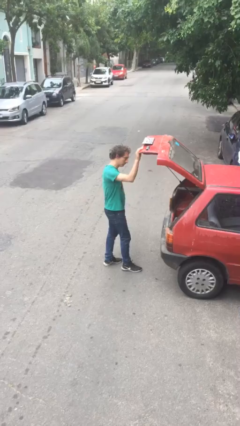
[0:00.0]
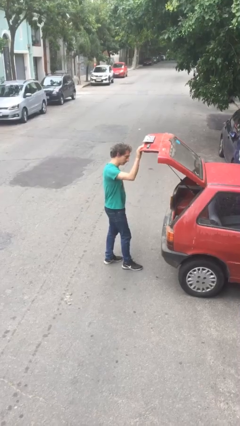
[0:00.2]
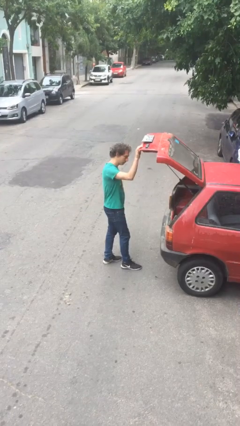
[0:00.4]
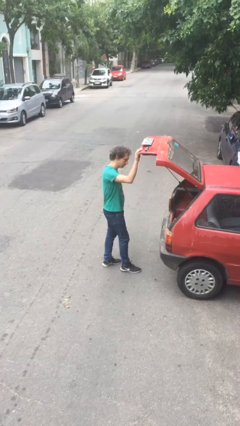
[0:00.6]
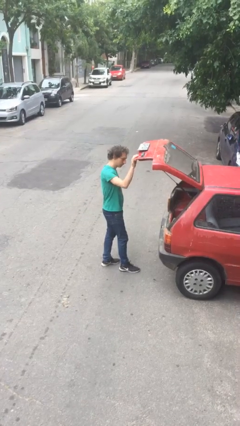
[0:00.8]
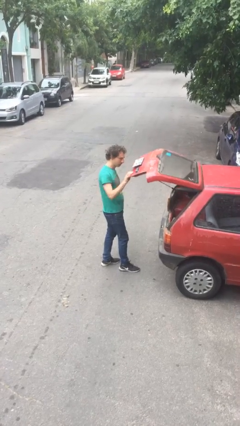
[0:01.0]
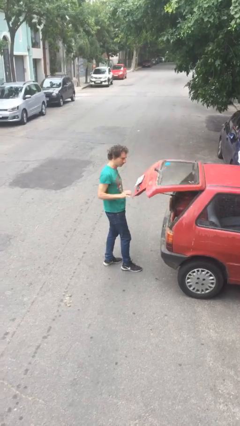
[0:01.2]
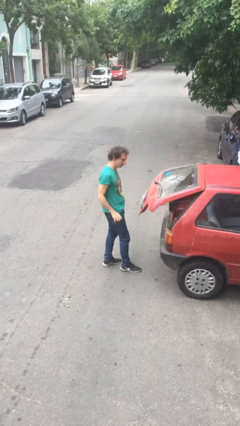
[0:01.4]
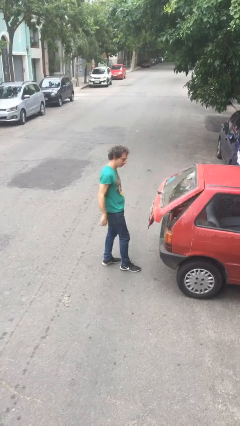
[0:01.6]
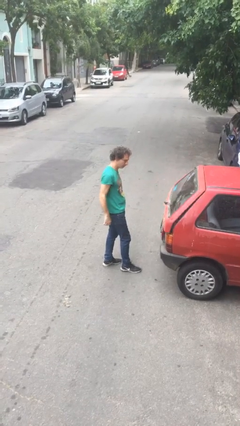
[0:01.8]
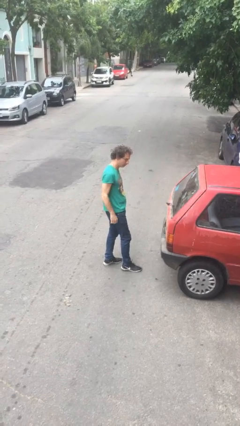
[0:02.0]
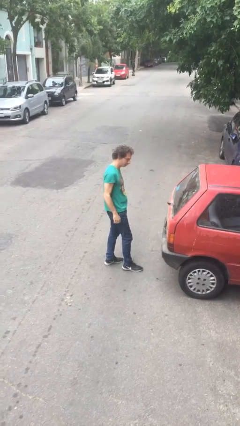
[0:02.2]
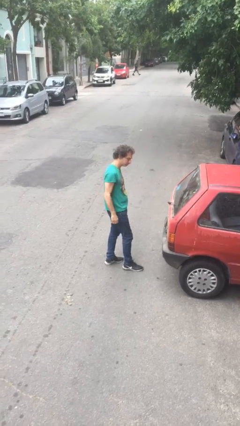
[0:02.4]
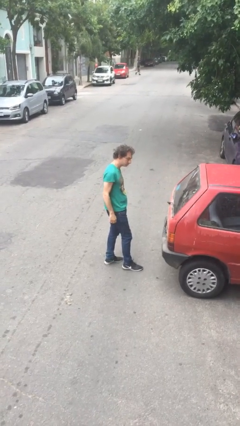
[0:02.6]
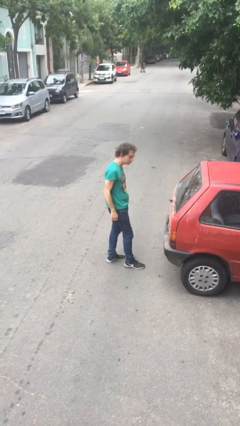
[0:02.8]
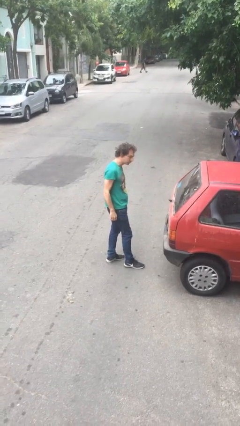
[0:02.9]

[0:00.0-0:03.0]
person closes car trunk

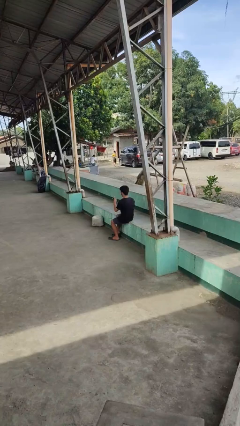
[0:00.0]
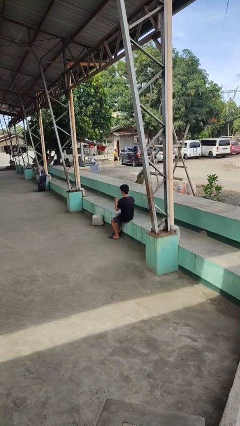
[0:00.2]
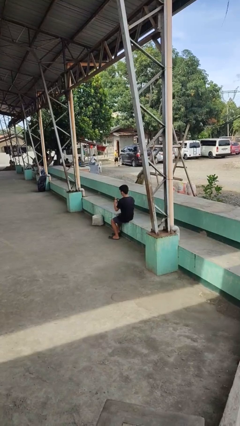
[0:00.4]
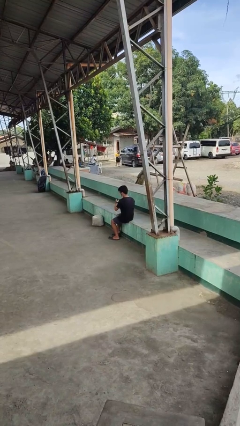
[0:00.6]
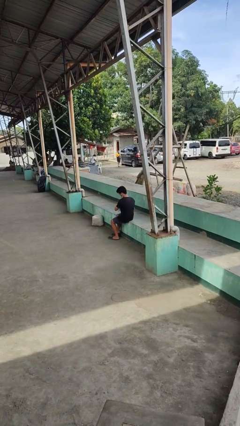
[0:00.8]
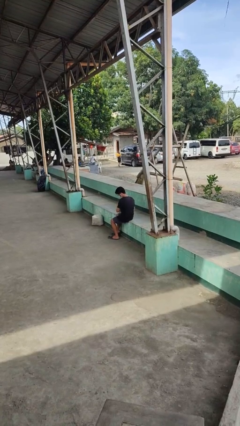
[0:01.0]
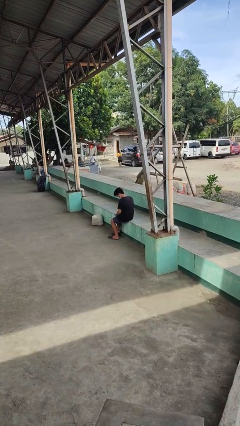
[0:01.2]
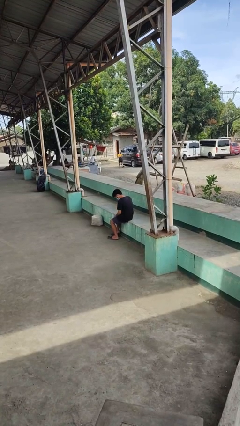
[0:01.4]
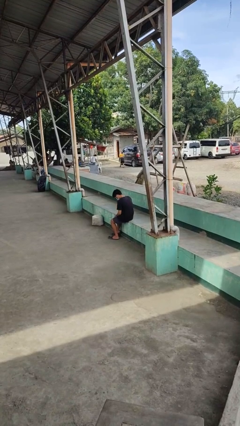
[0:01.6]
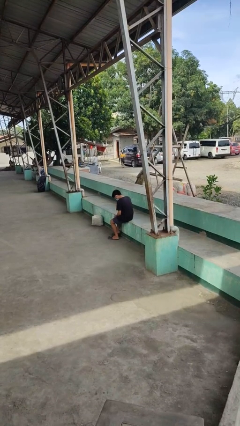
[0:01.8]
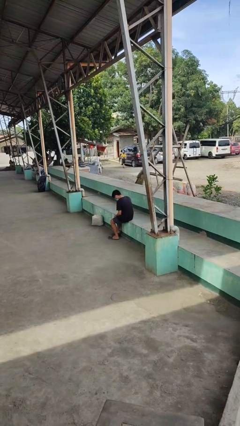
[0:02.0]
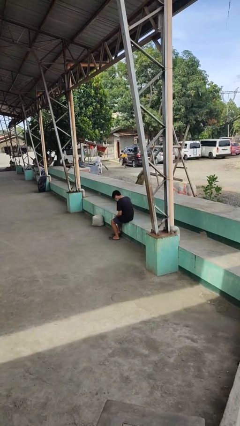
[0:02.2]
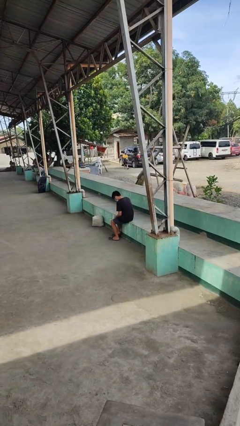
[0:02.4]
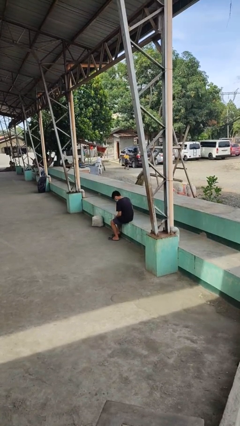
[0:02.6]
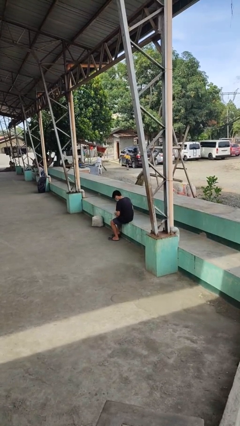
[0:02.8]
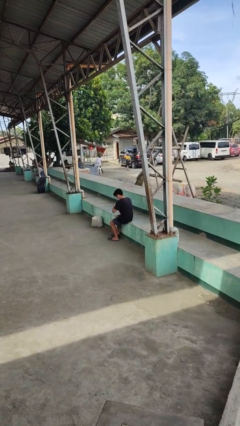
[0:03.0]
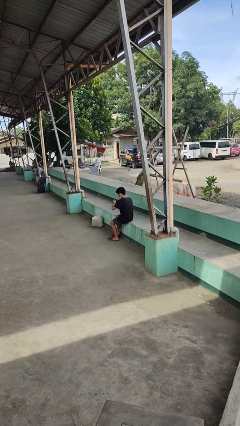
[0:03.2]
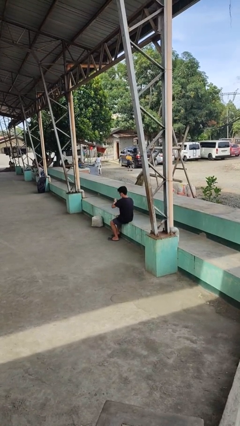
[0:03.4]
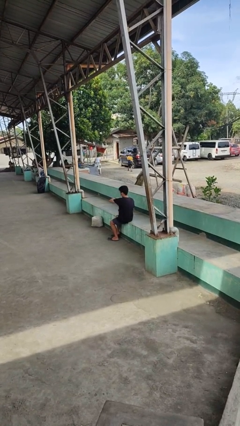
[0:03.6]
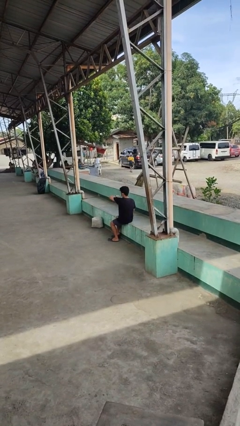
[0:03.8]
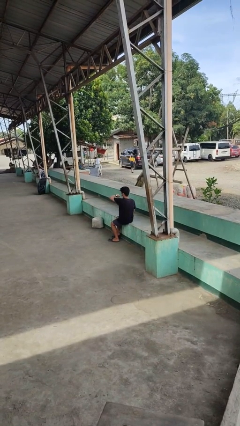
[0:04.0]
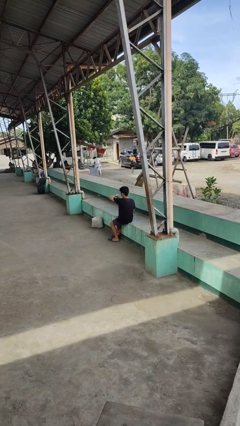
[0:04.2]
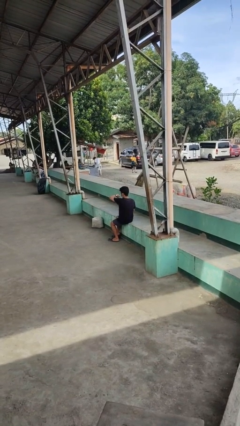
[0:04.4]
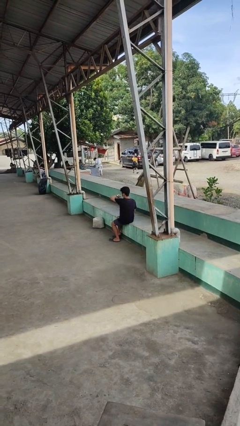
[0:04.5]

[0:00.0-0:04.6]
person puts on wristwatch

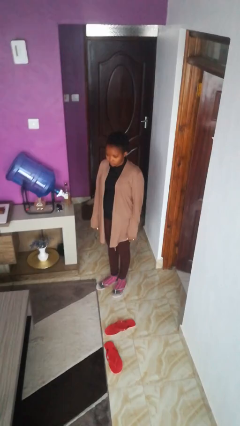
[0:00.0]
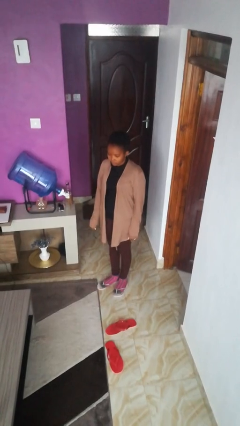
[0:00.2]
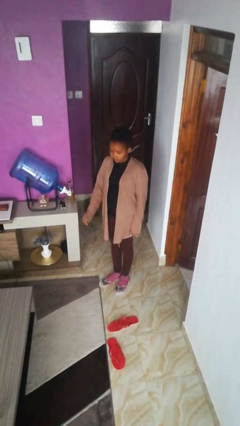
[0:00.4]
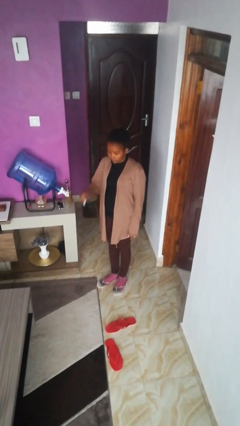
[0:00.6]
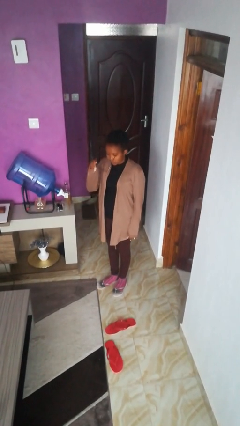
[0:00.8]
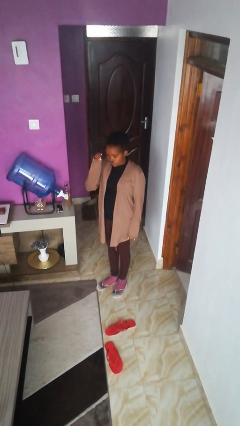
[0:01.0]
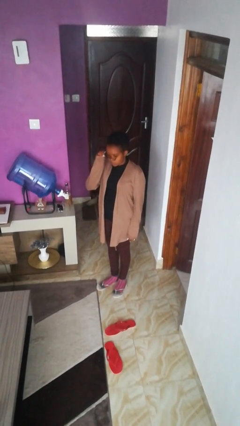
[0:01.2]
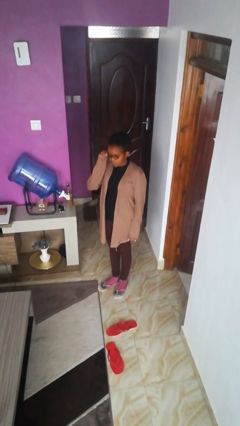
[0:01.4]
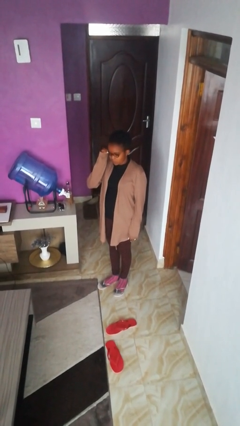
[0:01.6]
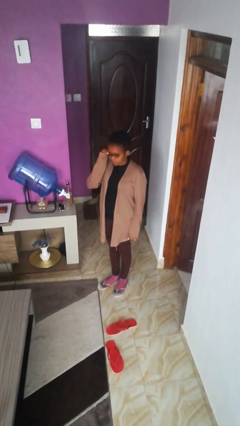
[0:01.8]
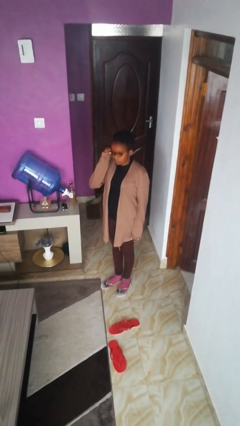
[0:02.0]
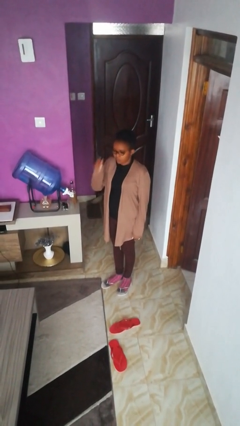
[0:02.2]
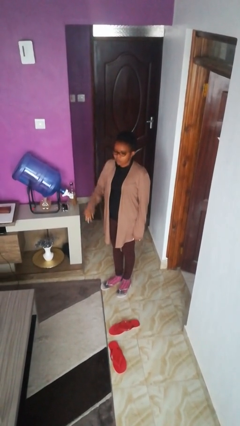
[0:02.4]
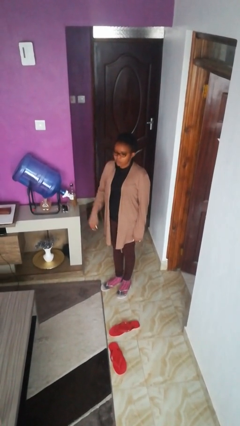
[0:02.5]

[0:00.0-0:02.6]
person puts on glasses

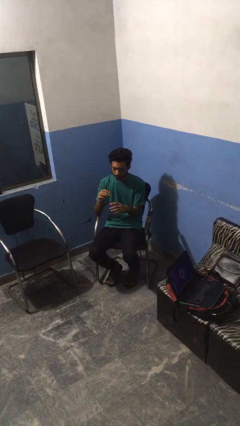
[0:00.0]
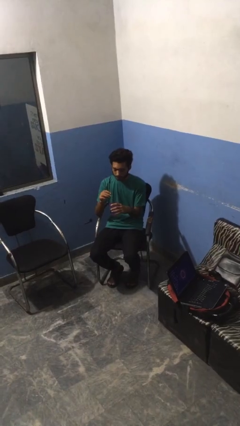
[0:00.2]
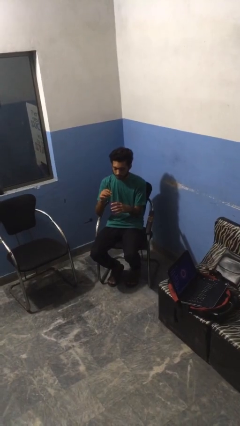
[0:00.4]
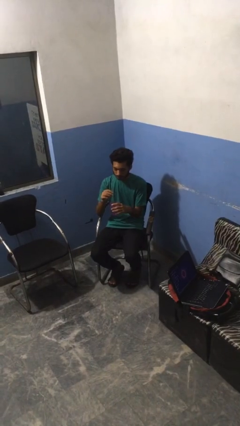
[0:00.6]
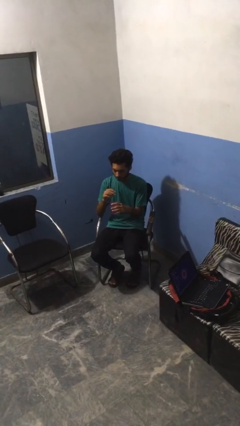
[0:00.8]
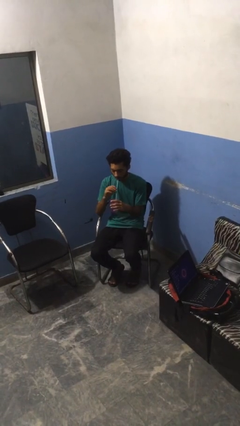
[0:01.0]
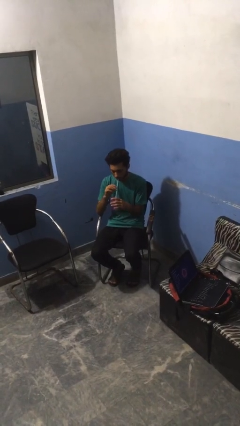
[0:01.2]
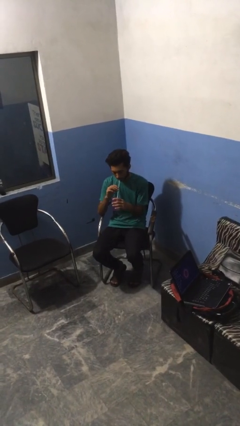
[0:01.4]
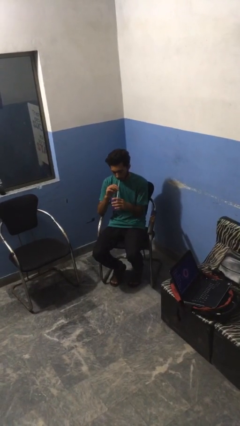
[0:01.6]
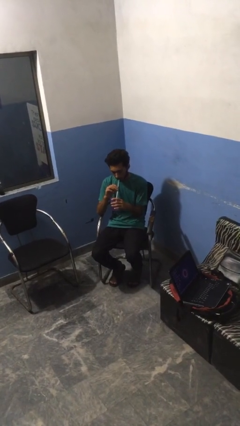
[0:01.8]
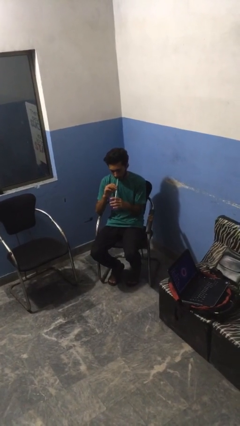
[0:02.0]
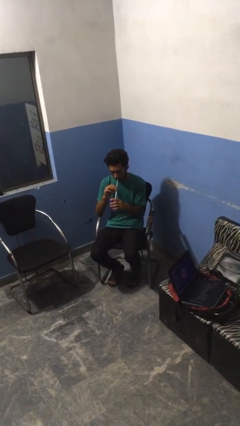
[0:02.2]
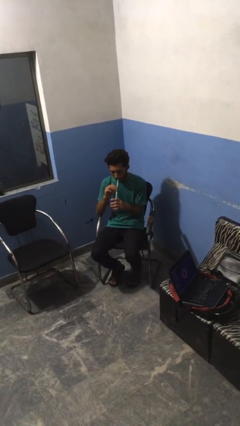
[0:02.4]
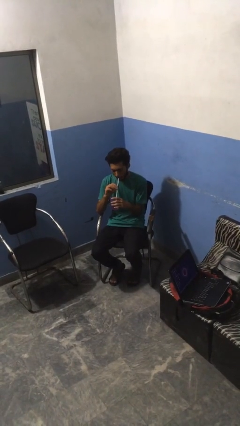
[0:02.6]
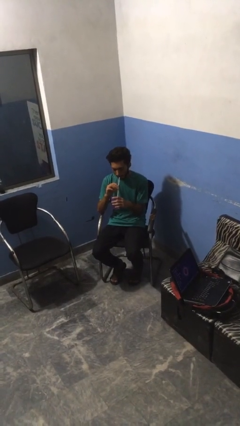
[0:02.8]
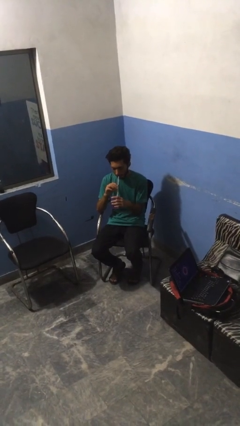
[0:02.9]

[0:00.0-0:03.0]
person drinks from straw

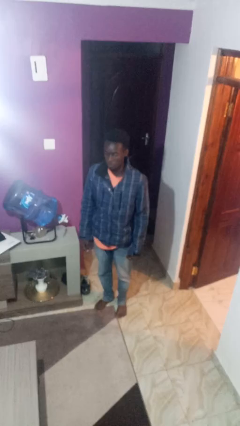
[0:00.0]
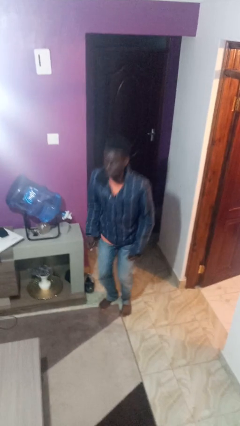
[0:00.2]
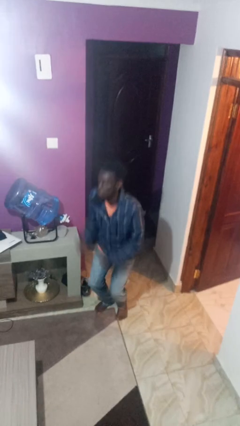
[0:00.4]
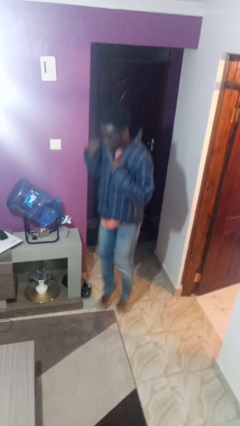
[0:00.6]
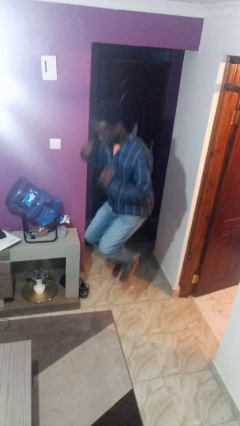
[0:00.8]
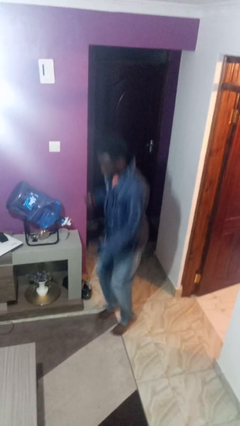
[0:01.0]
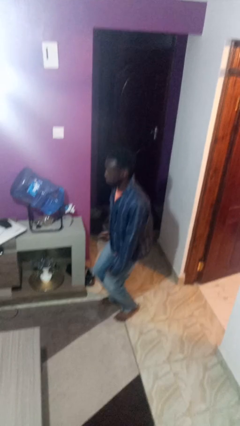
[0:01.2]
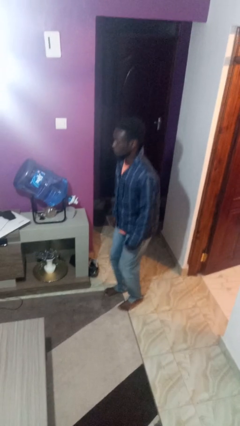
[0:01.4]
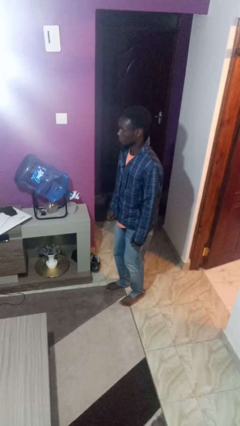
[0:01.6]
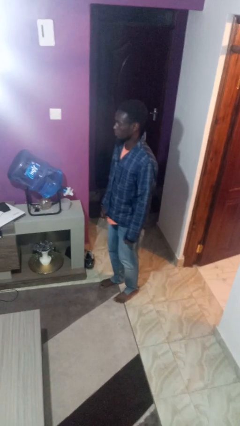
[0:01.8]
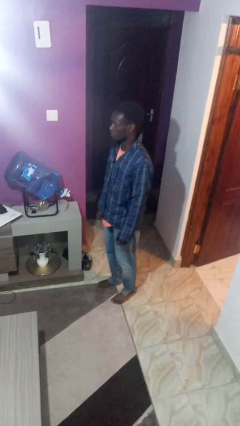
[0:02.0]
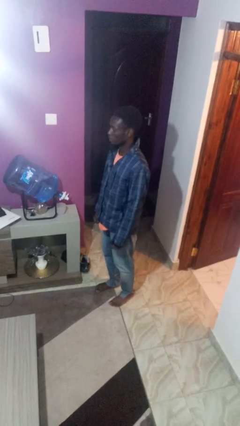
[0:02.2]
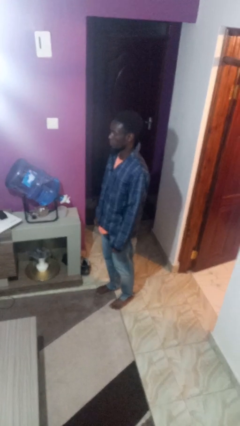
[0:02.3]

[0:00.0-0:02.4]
person jumps

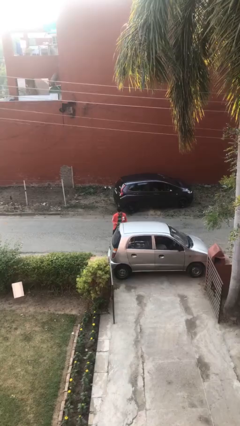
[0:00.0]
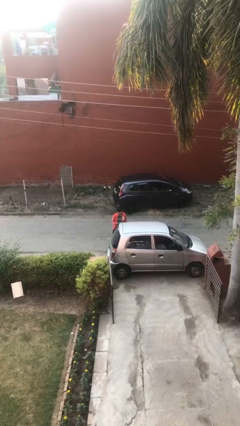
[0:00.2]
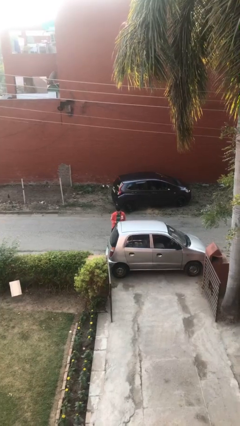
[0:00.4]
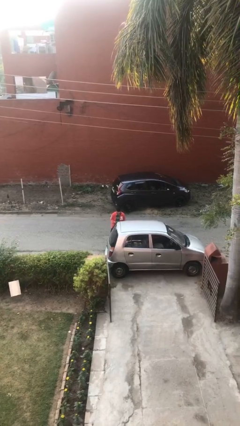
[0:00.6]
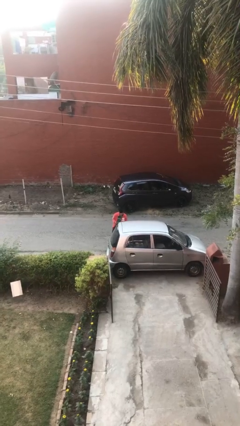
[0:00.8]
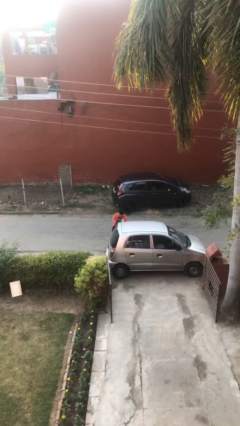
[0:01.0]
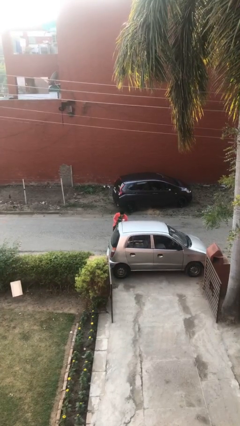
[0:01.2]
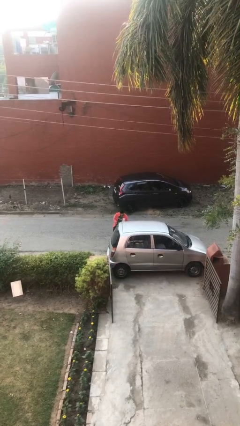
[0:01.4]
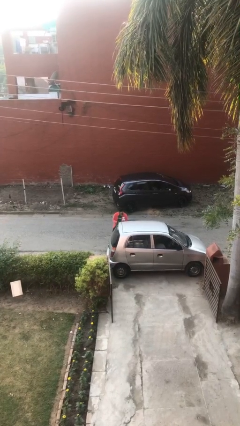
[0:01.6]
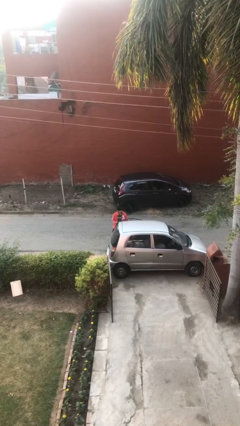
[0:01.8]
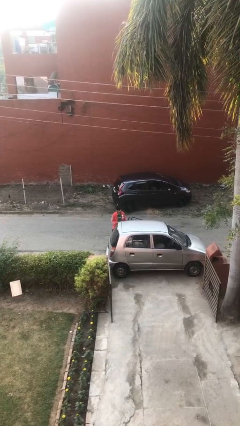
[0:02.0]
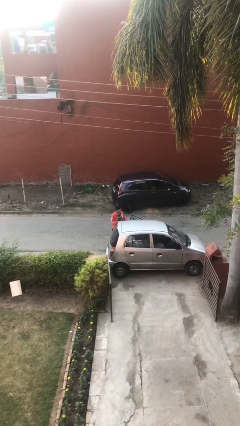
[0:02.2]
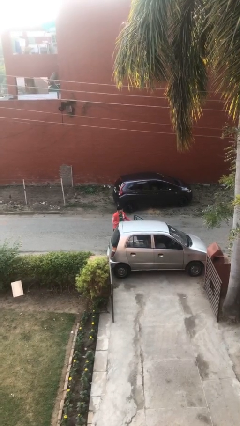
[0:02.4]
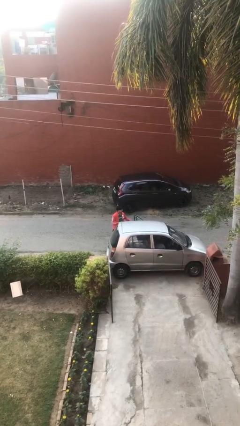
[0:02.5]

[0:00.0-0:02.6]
person opens car door
